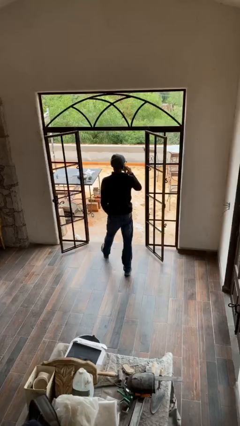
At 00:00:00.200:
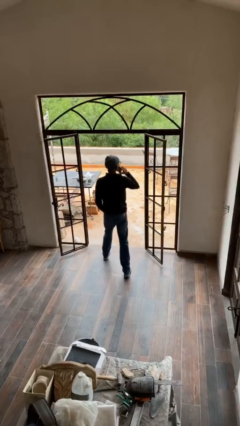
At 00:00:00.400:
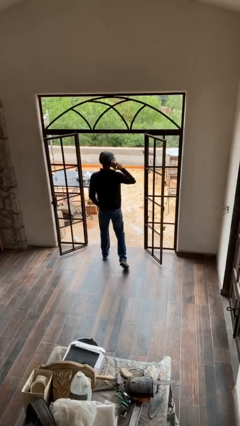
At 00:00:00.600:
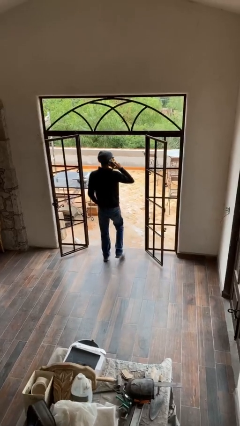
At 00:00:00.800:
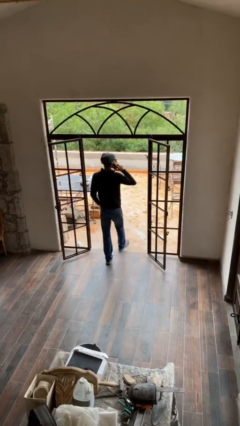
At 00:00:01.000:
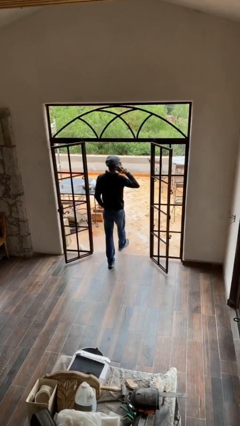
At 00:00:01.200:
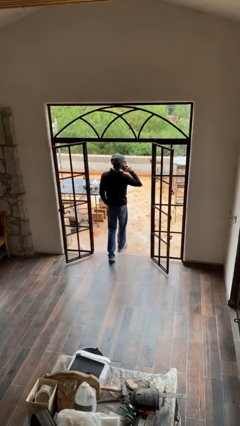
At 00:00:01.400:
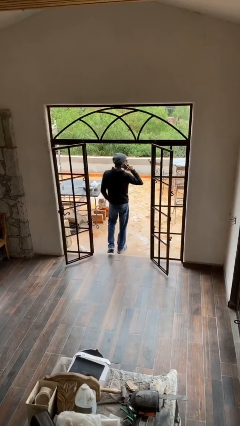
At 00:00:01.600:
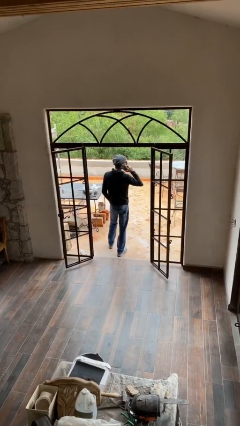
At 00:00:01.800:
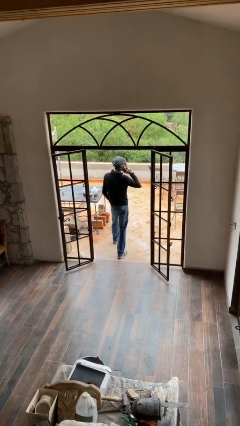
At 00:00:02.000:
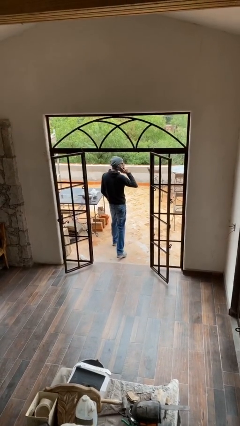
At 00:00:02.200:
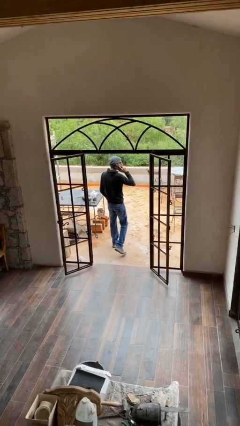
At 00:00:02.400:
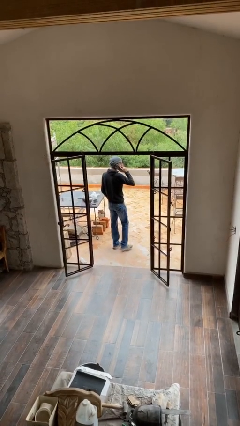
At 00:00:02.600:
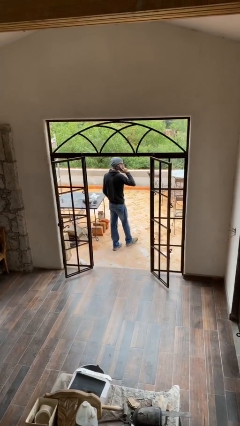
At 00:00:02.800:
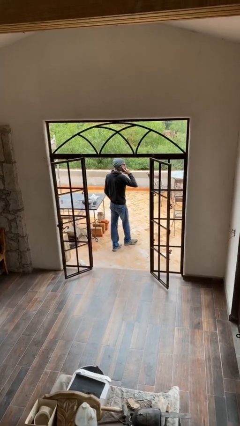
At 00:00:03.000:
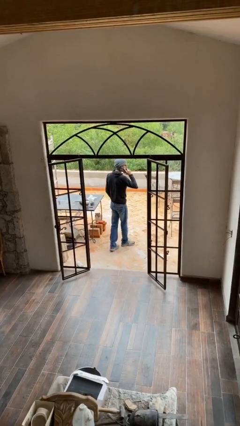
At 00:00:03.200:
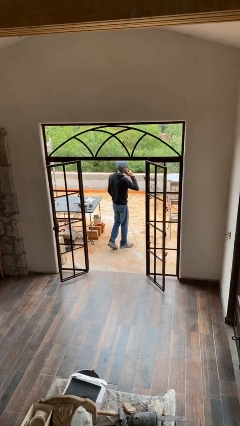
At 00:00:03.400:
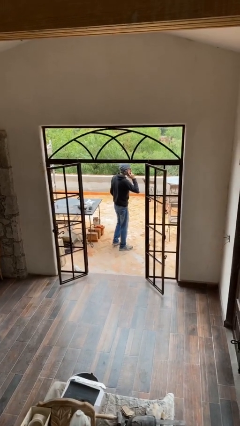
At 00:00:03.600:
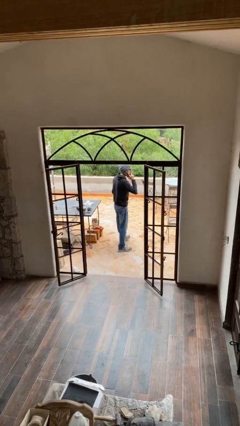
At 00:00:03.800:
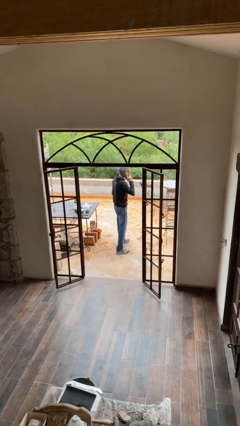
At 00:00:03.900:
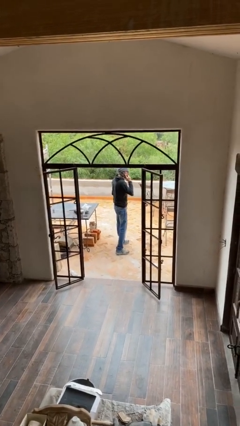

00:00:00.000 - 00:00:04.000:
person exits scene through structure

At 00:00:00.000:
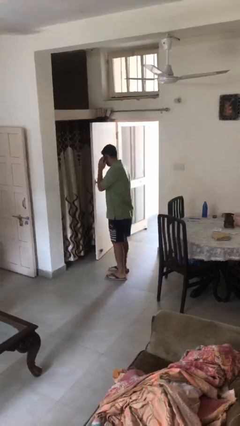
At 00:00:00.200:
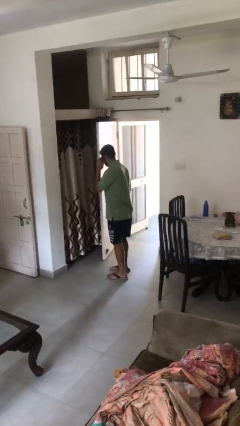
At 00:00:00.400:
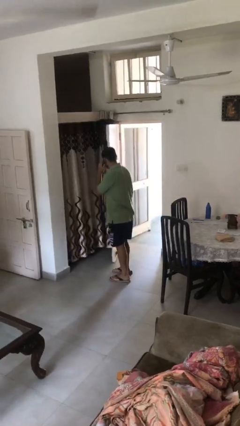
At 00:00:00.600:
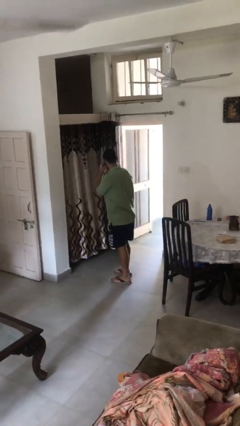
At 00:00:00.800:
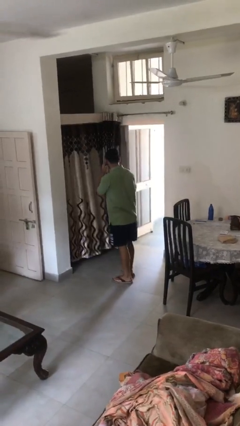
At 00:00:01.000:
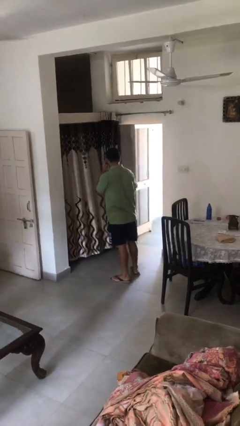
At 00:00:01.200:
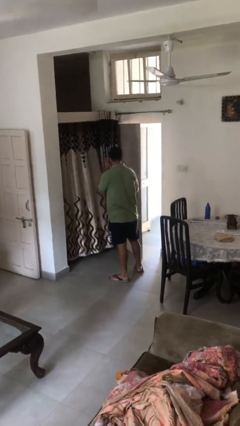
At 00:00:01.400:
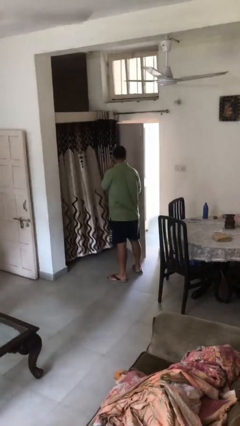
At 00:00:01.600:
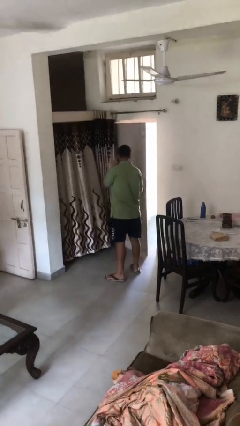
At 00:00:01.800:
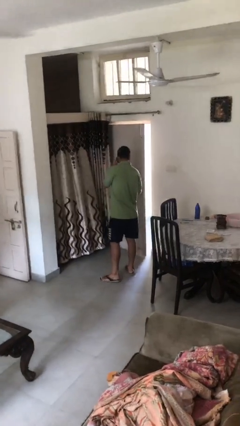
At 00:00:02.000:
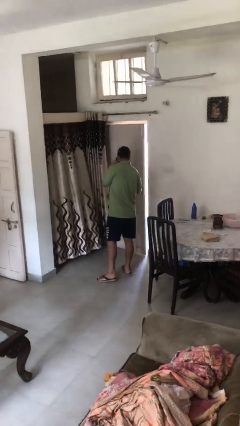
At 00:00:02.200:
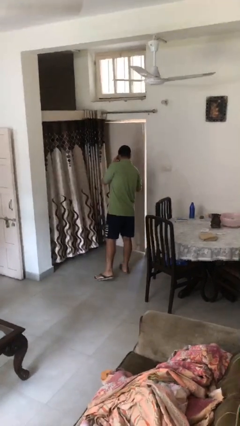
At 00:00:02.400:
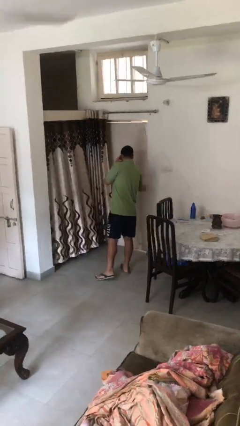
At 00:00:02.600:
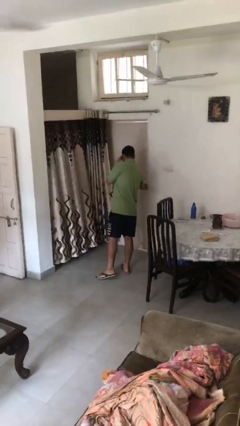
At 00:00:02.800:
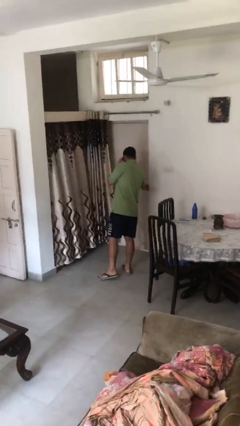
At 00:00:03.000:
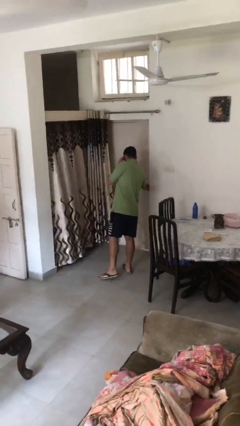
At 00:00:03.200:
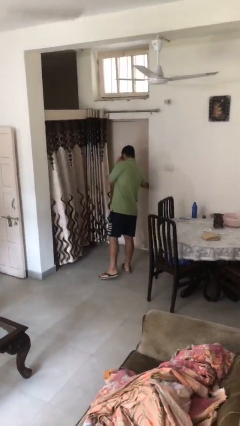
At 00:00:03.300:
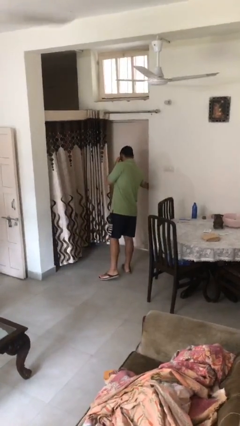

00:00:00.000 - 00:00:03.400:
person closes facility door

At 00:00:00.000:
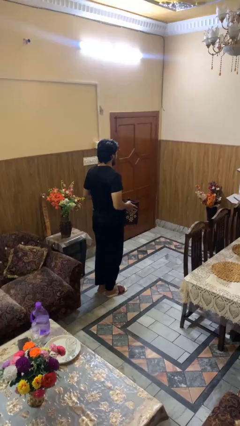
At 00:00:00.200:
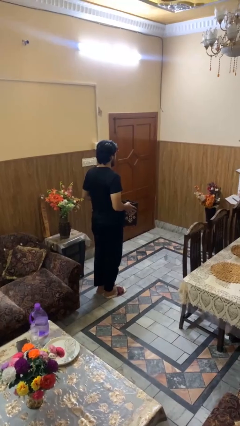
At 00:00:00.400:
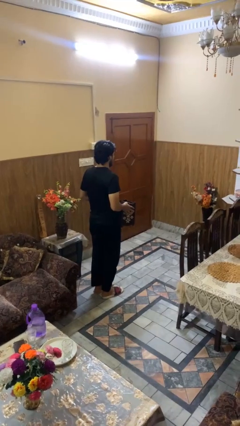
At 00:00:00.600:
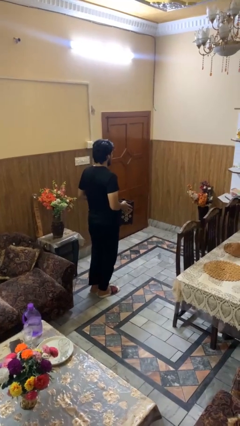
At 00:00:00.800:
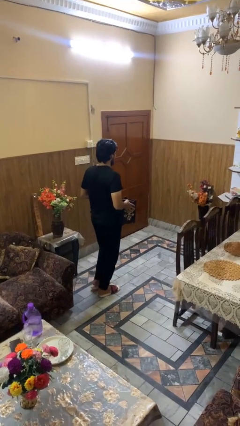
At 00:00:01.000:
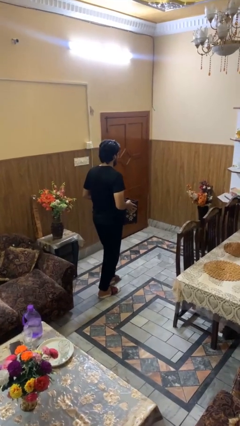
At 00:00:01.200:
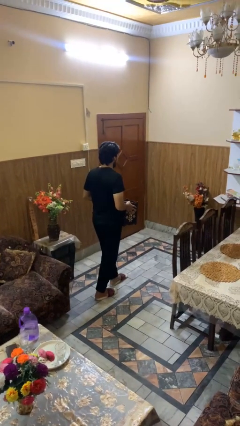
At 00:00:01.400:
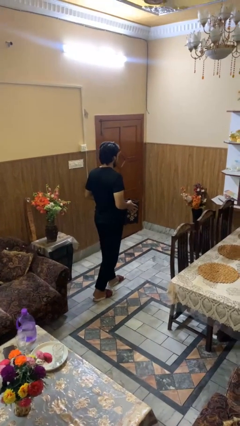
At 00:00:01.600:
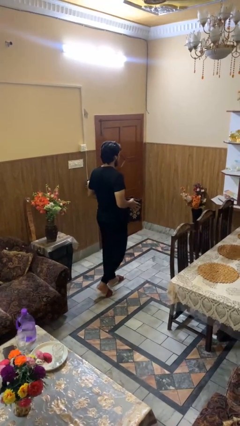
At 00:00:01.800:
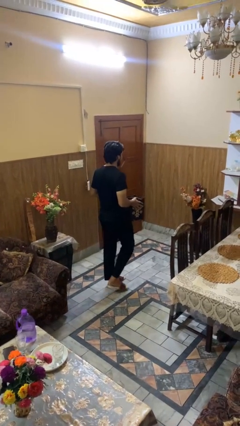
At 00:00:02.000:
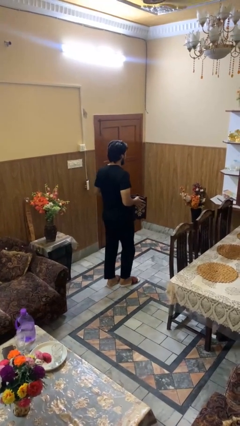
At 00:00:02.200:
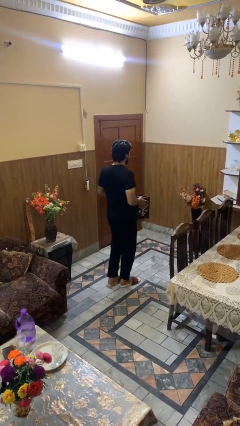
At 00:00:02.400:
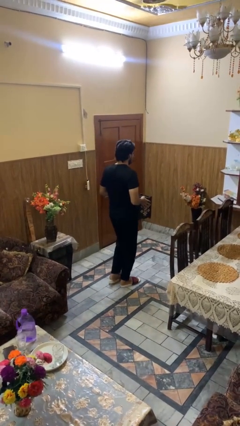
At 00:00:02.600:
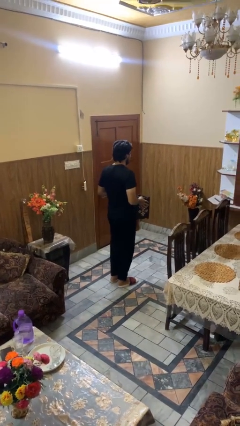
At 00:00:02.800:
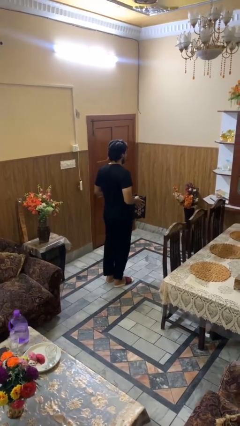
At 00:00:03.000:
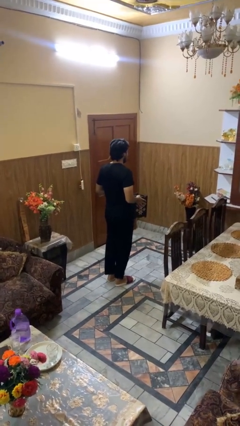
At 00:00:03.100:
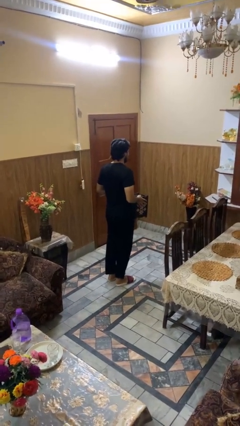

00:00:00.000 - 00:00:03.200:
person carries groceries

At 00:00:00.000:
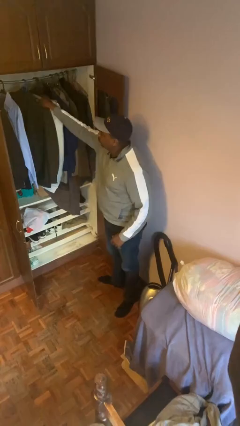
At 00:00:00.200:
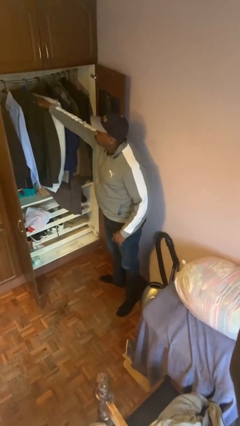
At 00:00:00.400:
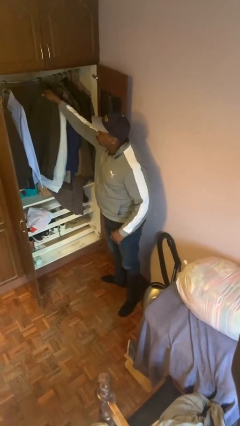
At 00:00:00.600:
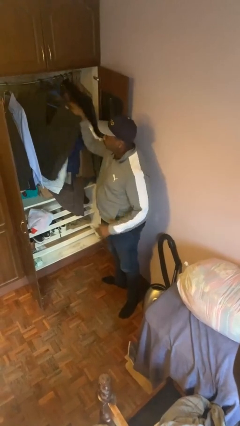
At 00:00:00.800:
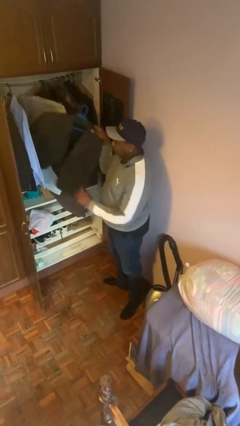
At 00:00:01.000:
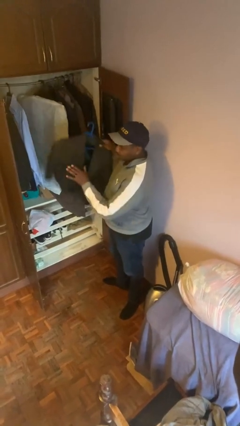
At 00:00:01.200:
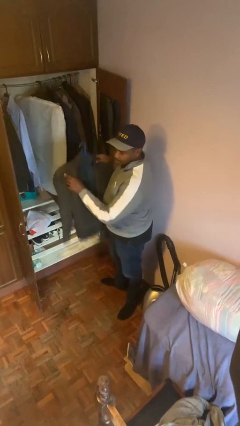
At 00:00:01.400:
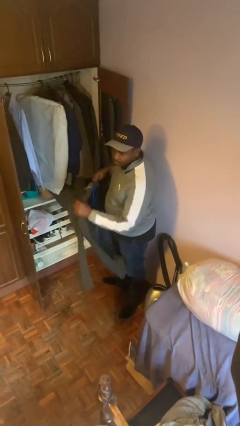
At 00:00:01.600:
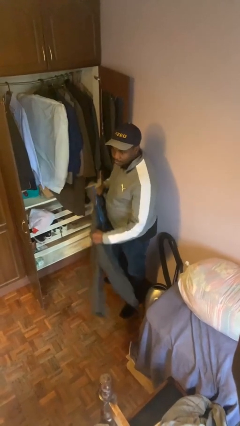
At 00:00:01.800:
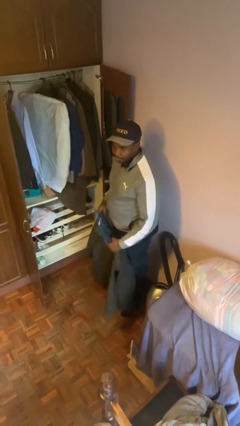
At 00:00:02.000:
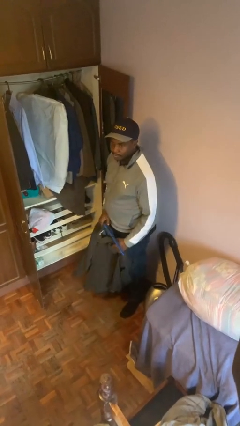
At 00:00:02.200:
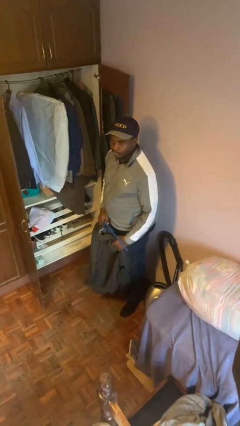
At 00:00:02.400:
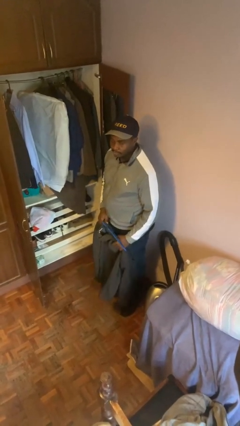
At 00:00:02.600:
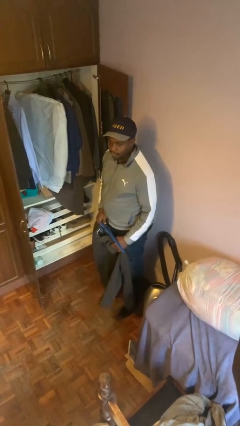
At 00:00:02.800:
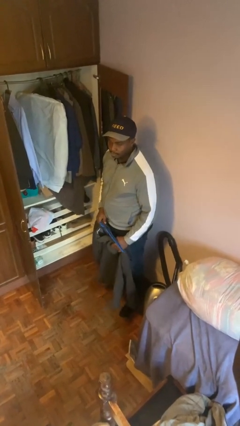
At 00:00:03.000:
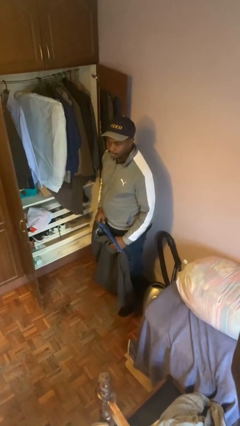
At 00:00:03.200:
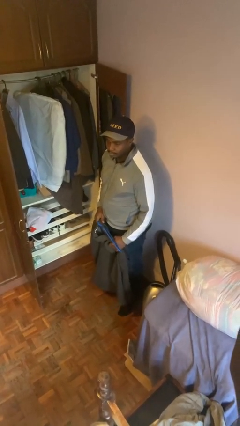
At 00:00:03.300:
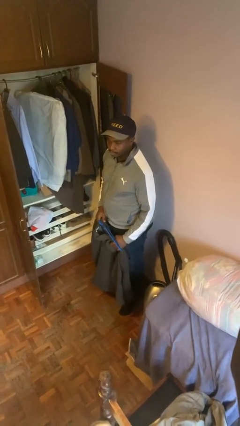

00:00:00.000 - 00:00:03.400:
person takes clothes from closet

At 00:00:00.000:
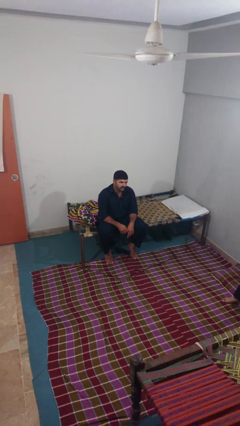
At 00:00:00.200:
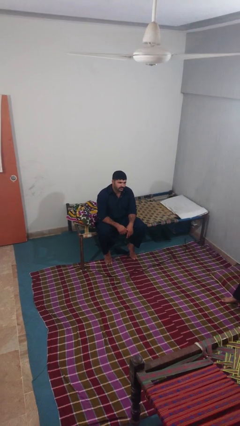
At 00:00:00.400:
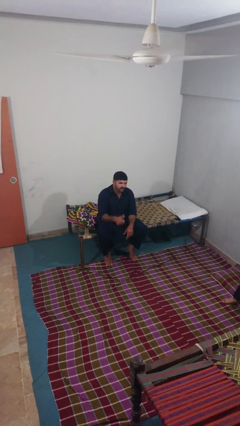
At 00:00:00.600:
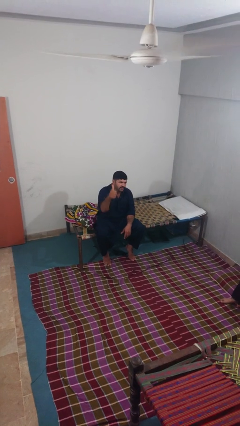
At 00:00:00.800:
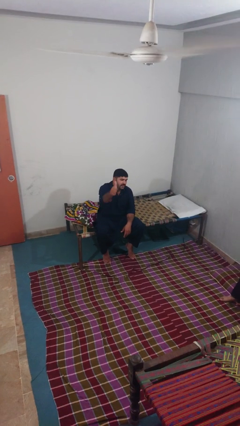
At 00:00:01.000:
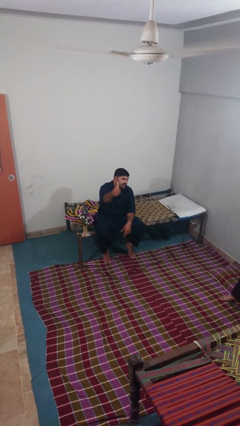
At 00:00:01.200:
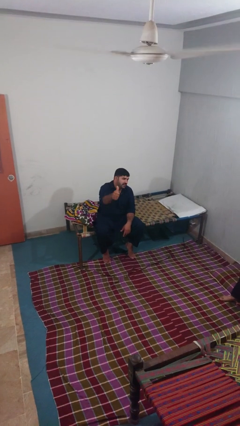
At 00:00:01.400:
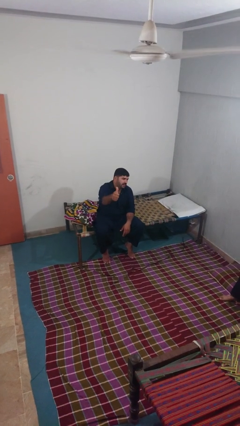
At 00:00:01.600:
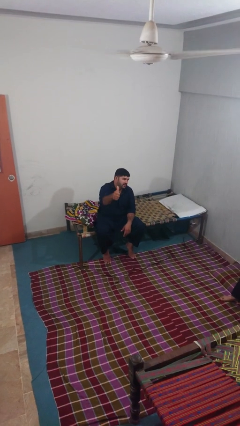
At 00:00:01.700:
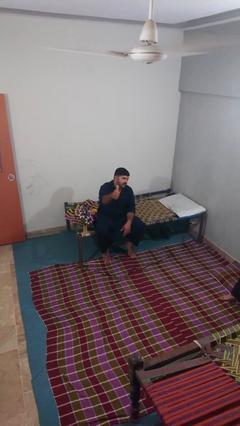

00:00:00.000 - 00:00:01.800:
person gestures thumbs up

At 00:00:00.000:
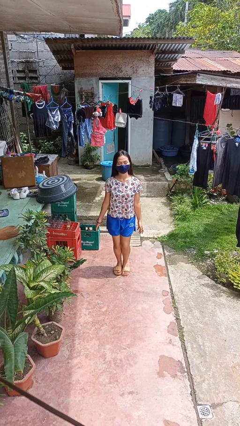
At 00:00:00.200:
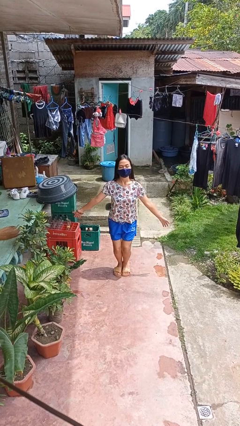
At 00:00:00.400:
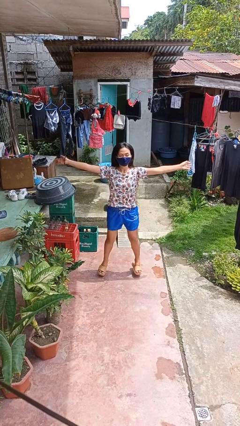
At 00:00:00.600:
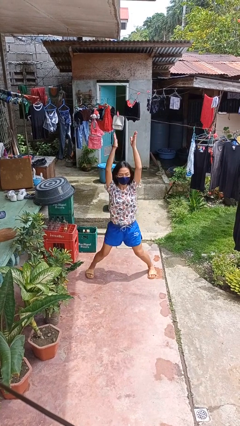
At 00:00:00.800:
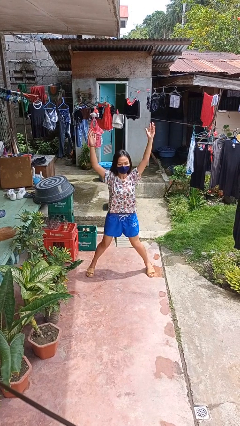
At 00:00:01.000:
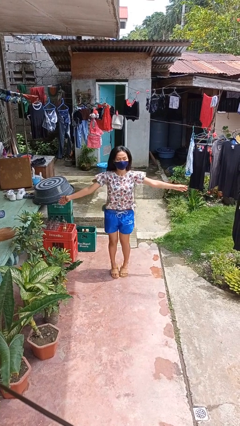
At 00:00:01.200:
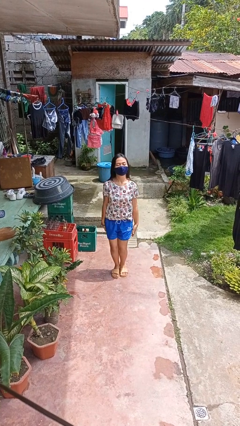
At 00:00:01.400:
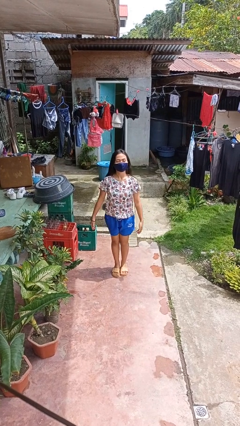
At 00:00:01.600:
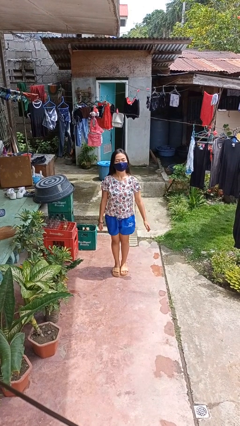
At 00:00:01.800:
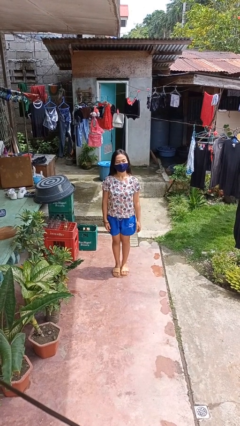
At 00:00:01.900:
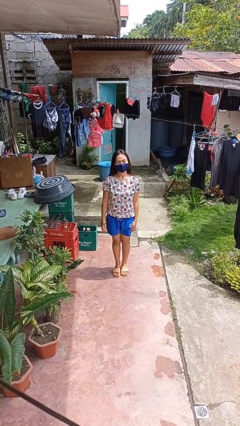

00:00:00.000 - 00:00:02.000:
person exercises with jumping jacks
